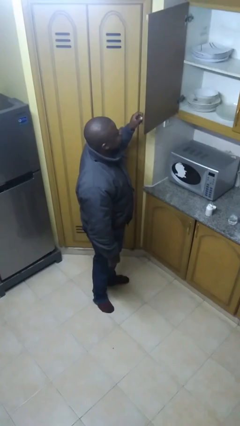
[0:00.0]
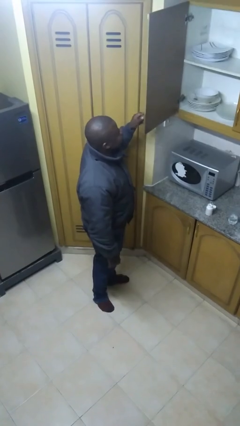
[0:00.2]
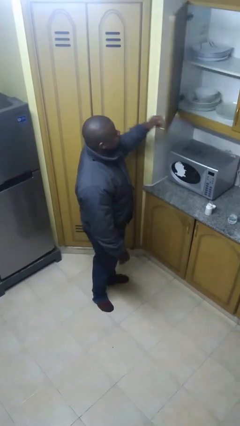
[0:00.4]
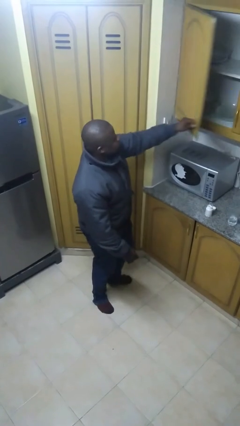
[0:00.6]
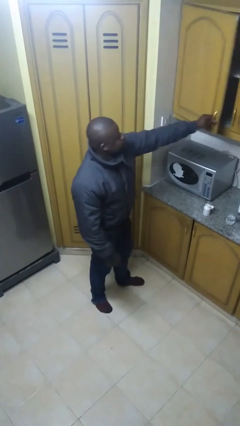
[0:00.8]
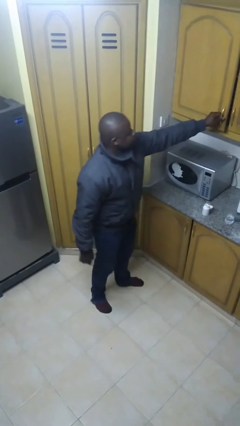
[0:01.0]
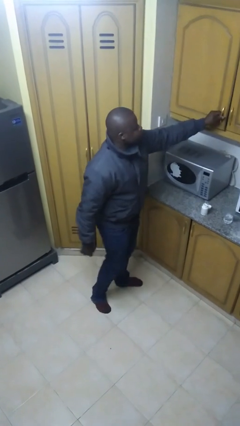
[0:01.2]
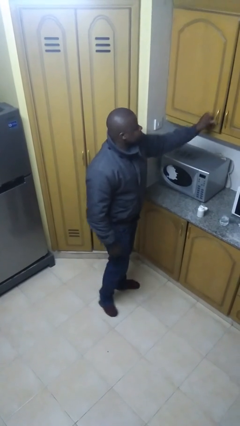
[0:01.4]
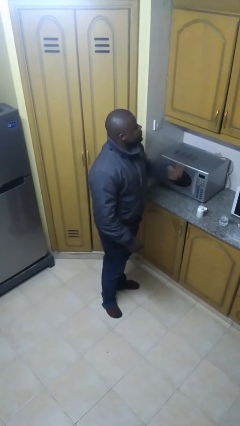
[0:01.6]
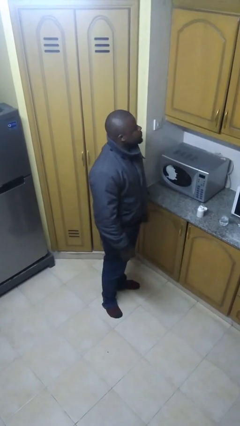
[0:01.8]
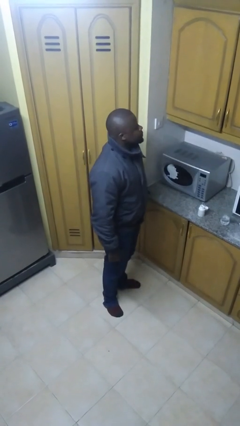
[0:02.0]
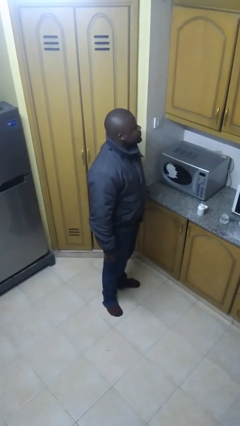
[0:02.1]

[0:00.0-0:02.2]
person closes cabinet

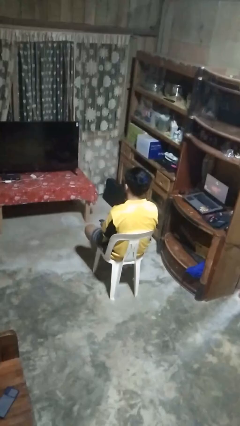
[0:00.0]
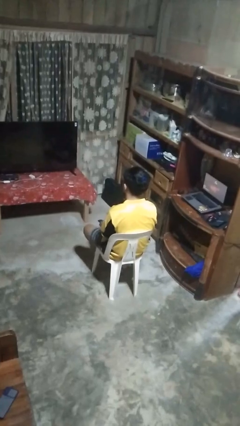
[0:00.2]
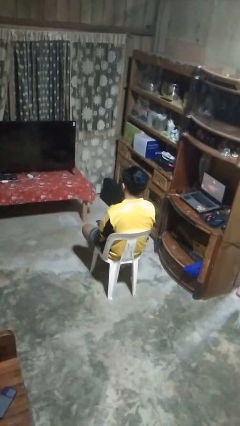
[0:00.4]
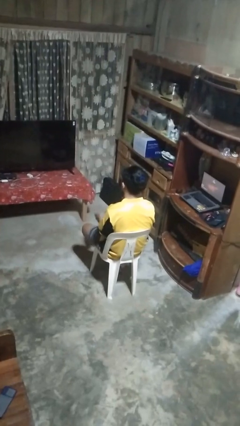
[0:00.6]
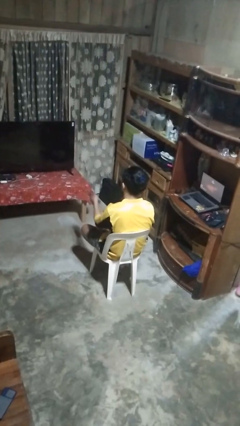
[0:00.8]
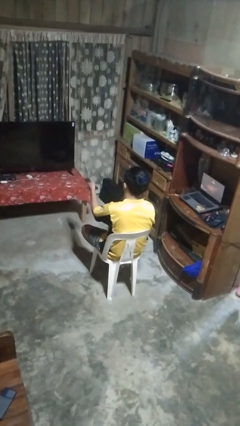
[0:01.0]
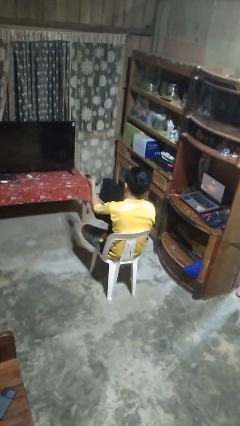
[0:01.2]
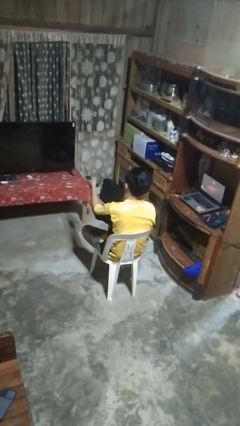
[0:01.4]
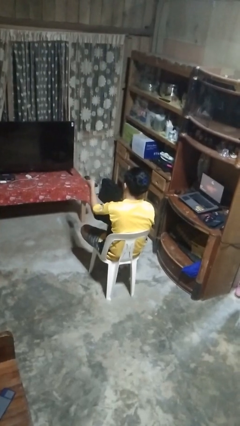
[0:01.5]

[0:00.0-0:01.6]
person uses television remote

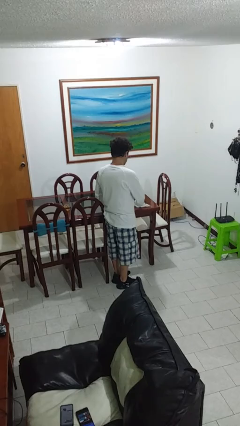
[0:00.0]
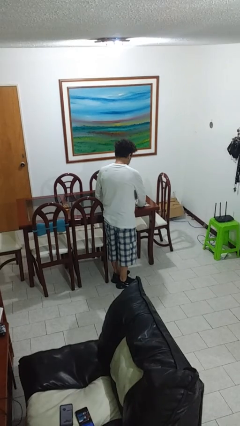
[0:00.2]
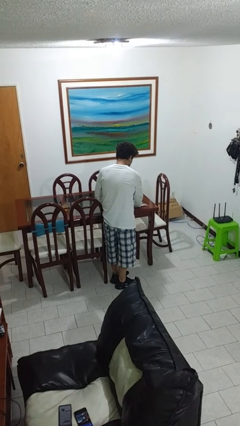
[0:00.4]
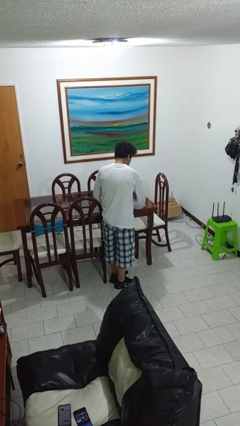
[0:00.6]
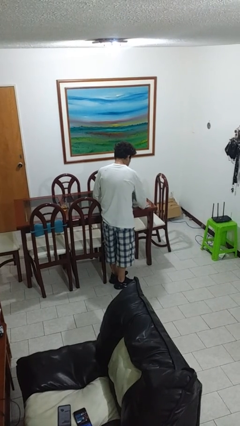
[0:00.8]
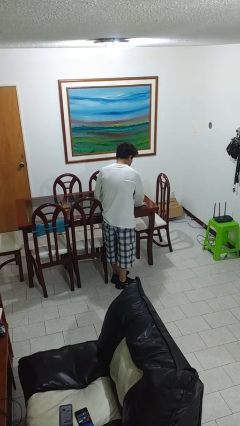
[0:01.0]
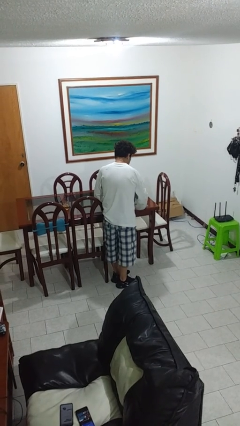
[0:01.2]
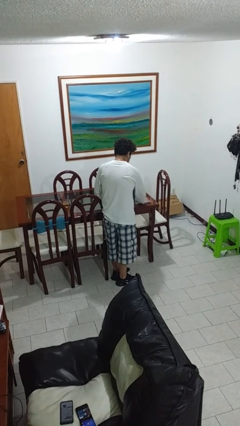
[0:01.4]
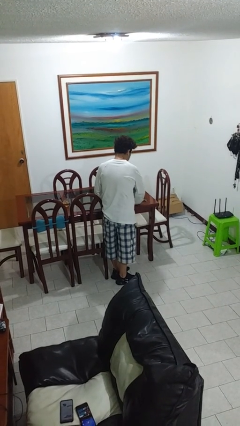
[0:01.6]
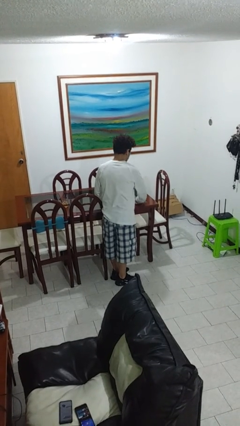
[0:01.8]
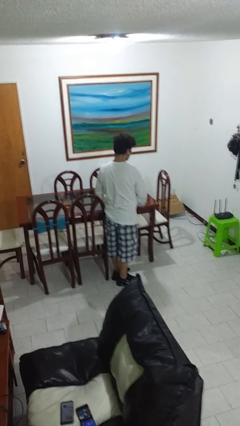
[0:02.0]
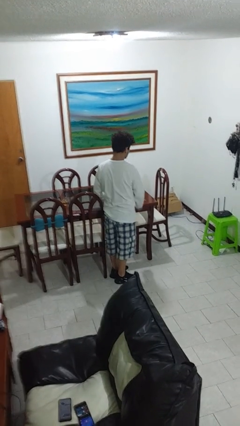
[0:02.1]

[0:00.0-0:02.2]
person cleans table with rag

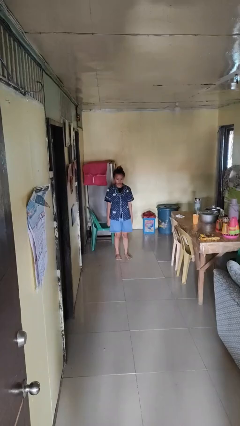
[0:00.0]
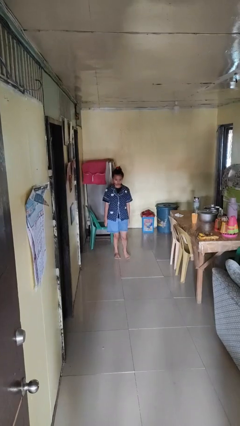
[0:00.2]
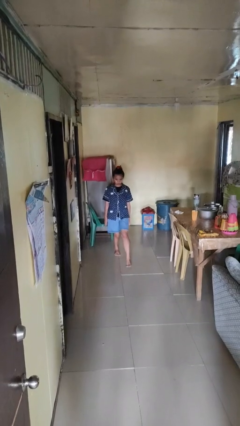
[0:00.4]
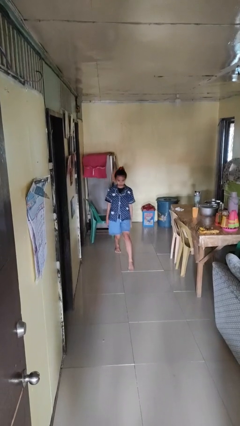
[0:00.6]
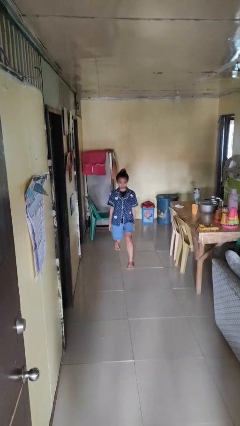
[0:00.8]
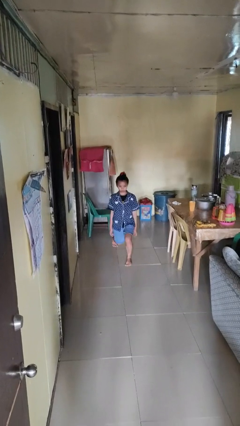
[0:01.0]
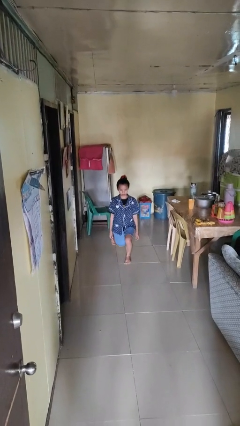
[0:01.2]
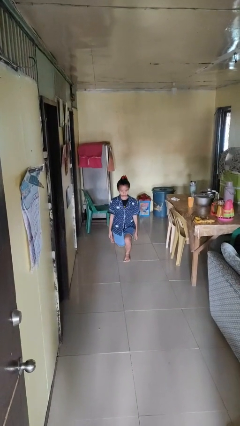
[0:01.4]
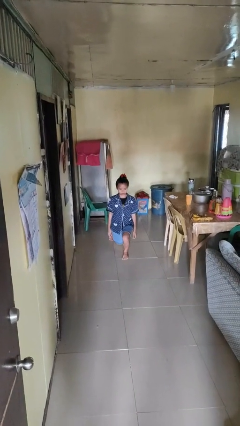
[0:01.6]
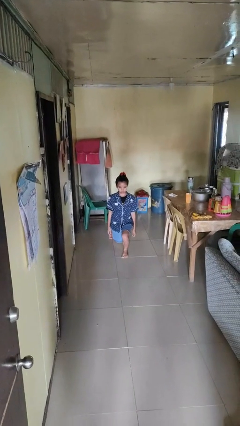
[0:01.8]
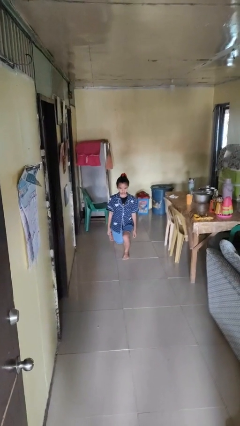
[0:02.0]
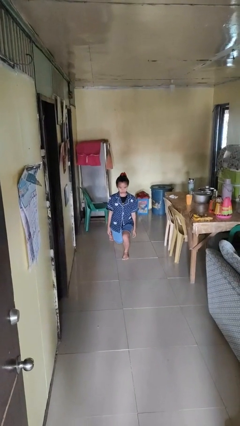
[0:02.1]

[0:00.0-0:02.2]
person exercises with lunges

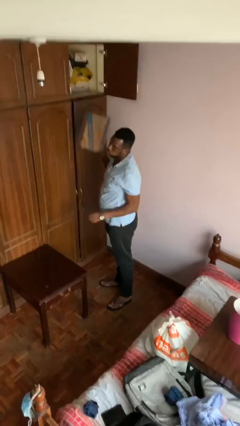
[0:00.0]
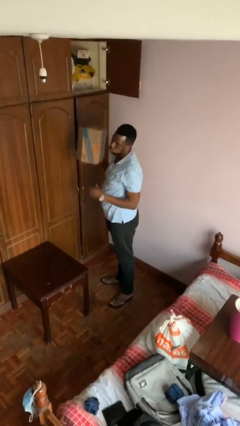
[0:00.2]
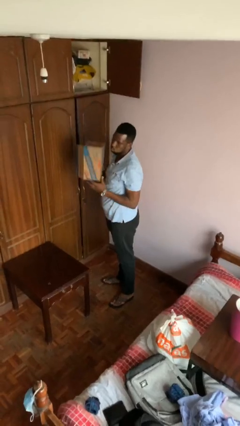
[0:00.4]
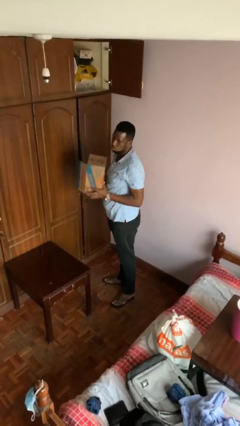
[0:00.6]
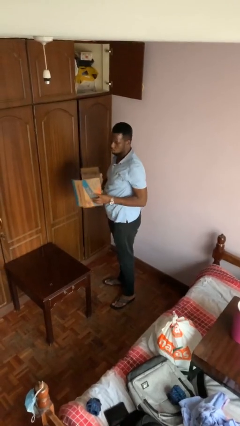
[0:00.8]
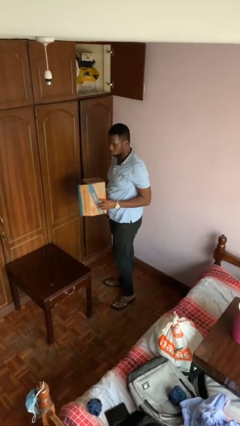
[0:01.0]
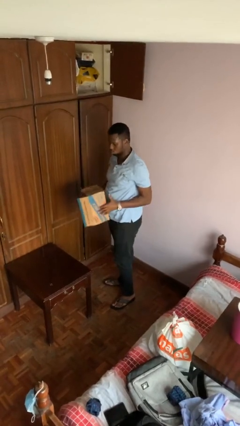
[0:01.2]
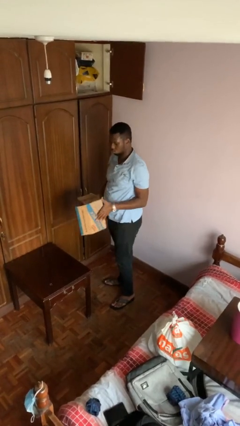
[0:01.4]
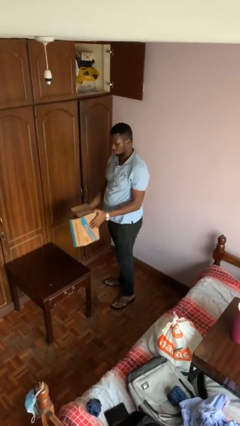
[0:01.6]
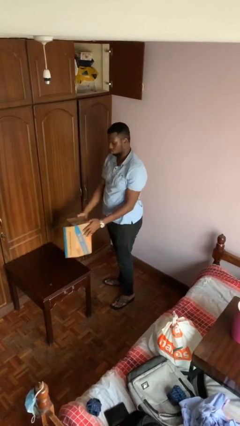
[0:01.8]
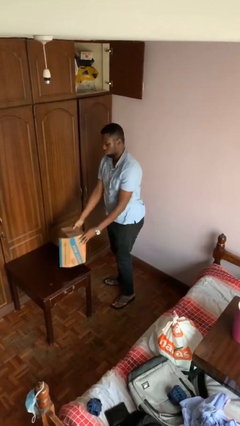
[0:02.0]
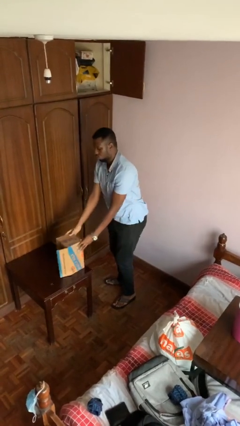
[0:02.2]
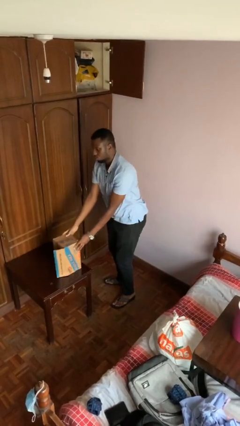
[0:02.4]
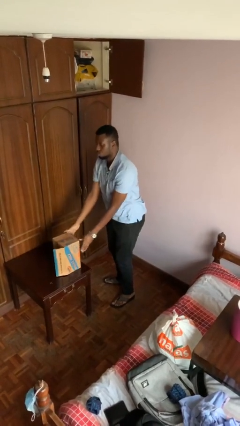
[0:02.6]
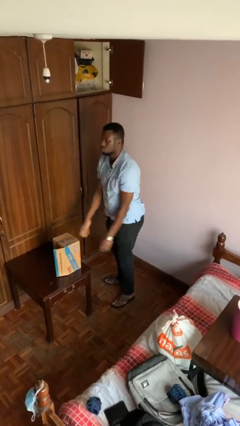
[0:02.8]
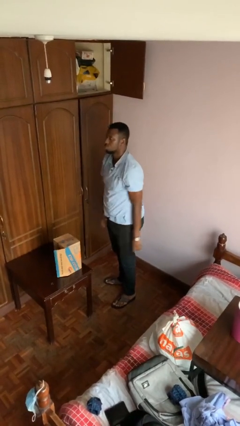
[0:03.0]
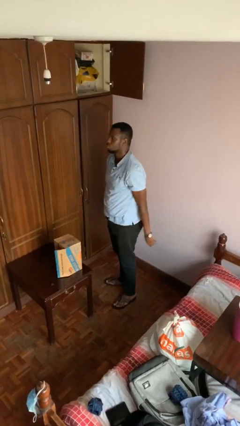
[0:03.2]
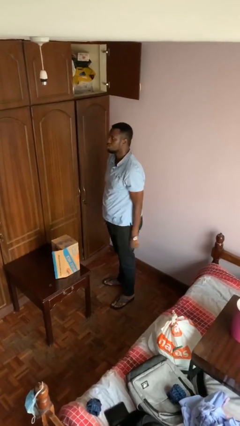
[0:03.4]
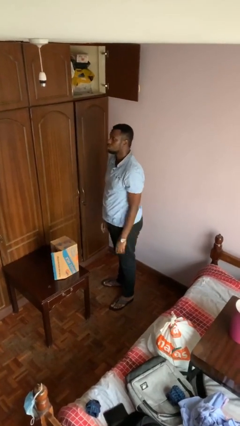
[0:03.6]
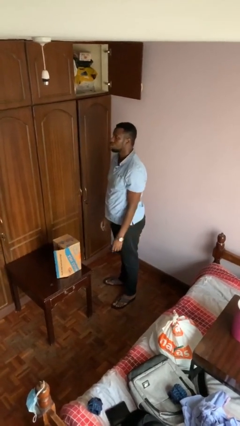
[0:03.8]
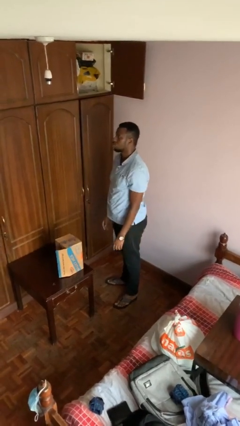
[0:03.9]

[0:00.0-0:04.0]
person puts down object on table

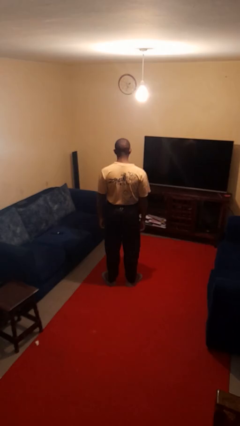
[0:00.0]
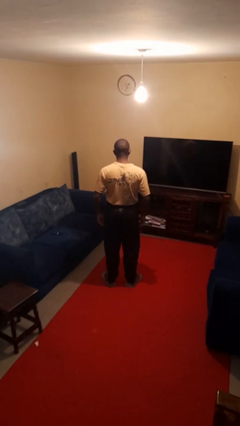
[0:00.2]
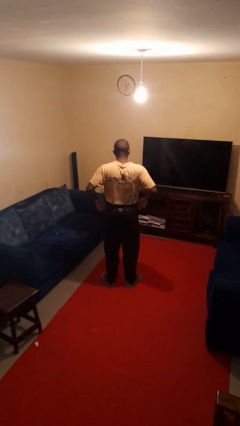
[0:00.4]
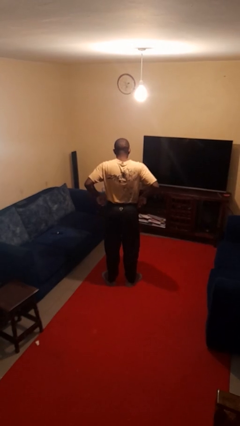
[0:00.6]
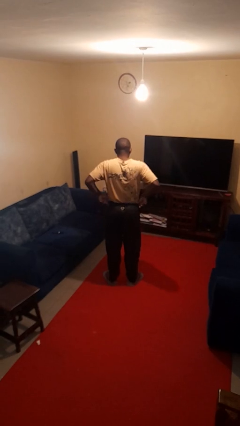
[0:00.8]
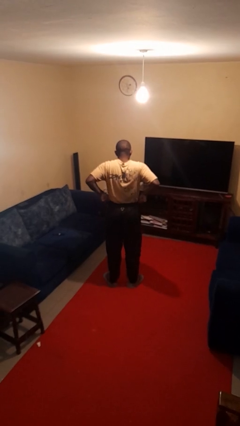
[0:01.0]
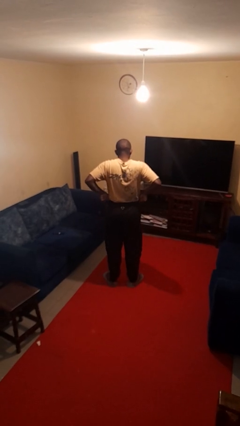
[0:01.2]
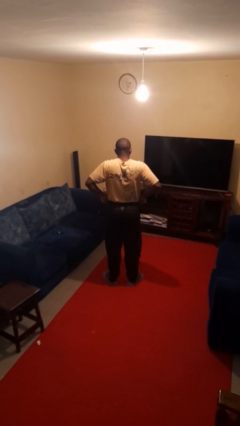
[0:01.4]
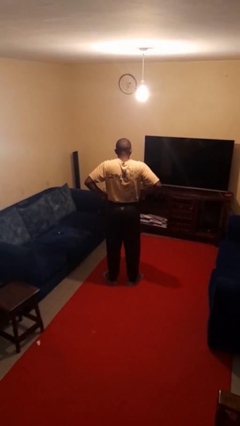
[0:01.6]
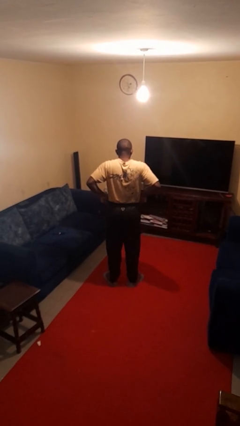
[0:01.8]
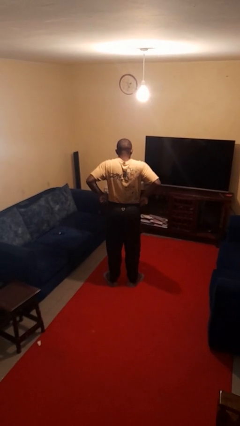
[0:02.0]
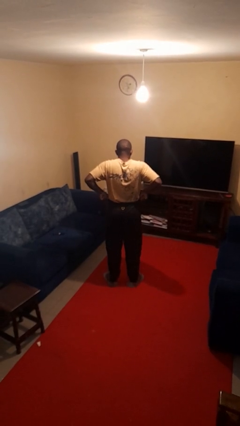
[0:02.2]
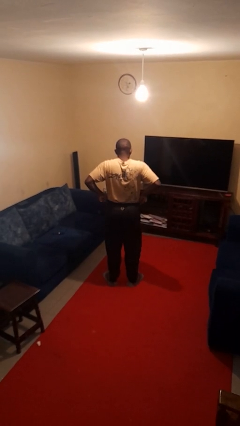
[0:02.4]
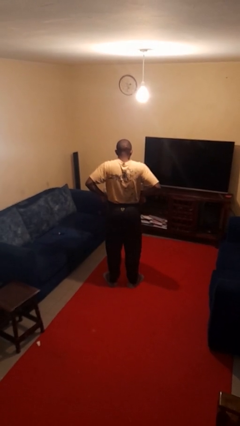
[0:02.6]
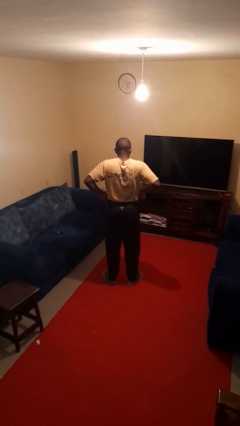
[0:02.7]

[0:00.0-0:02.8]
person hikes up pants

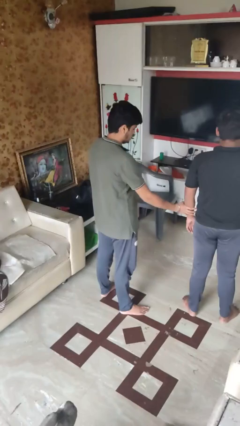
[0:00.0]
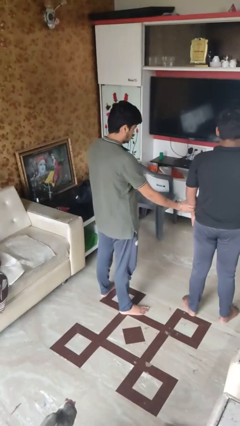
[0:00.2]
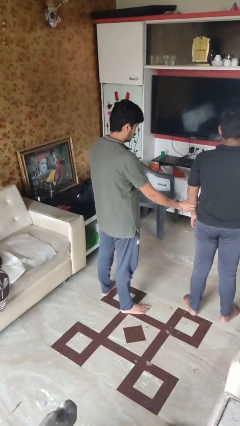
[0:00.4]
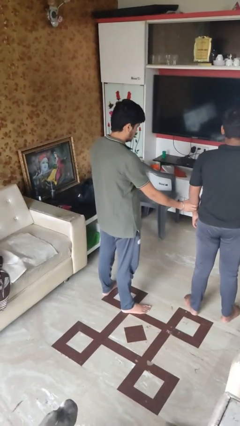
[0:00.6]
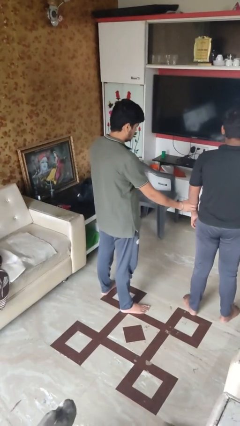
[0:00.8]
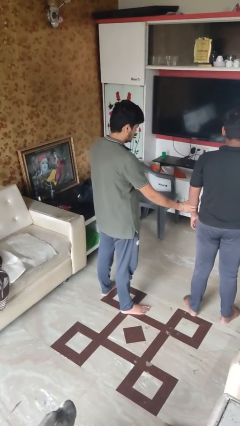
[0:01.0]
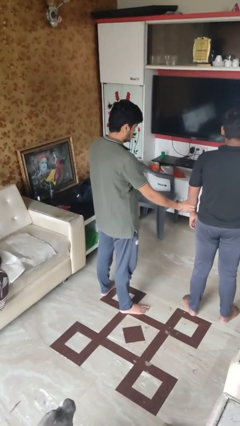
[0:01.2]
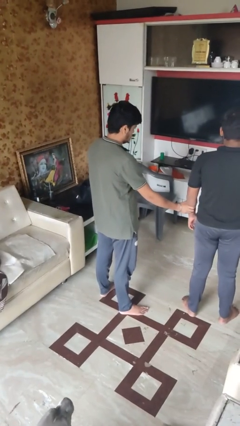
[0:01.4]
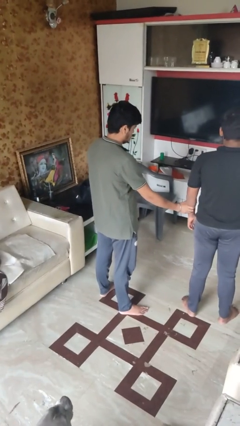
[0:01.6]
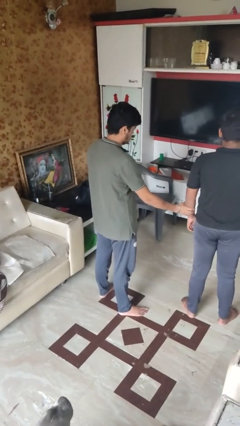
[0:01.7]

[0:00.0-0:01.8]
person grabs person by forearm
